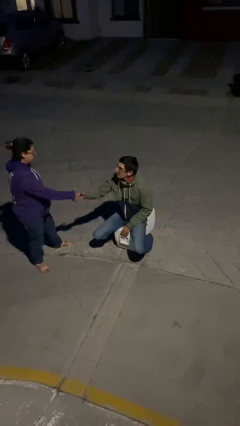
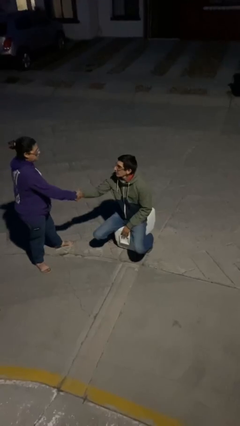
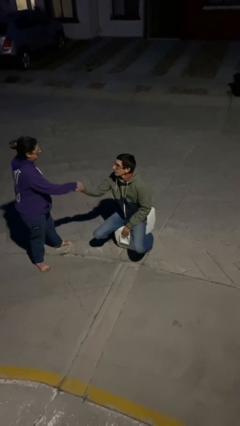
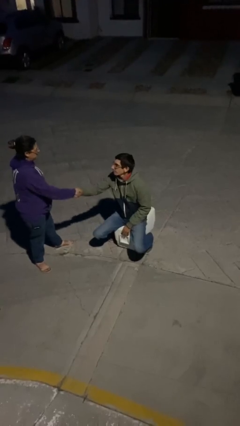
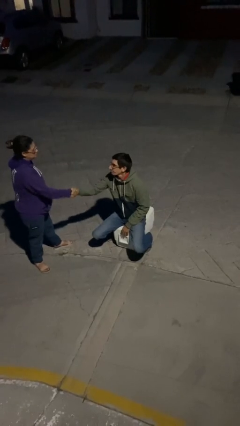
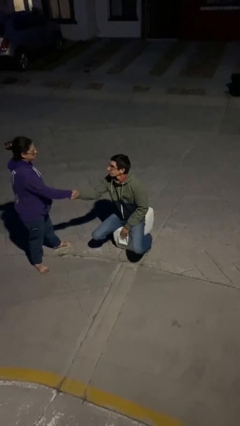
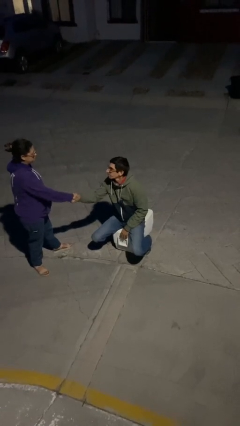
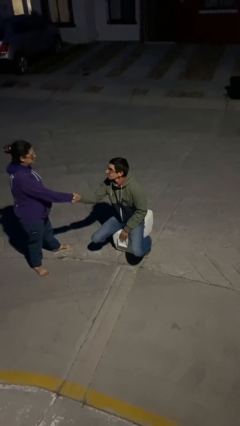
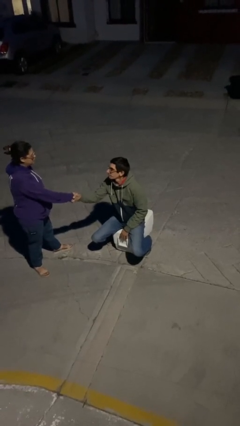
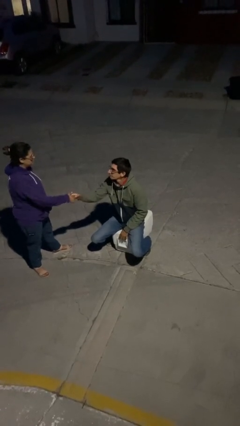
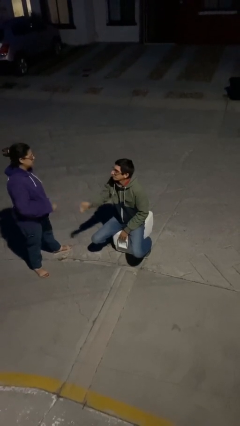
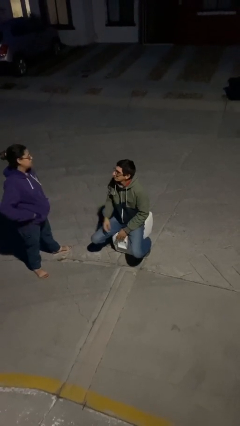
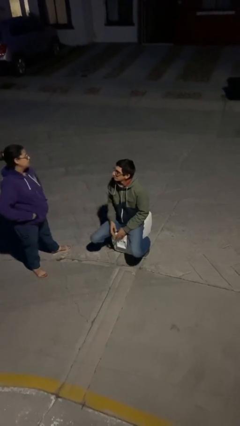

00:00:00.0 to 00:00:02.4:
person shakes hand

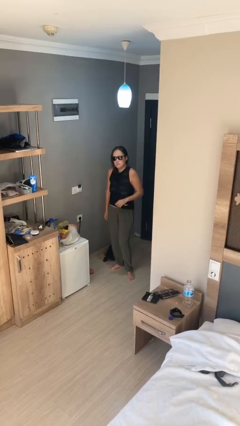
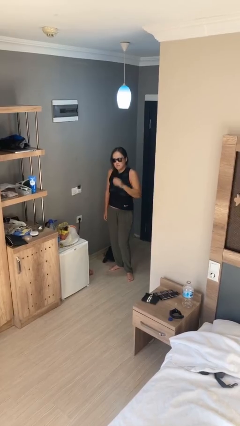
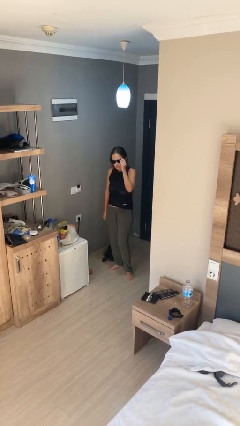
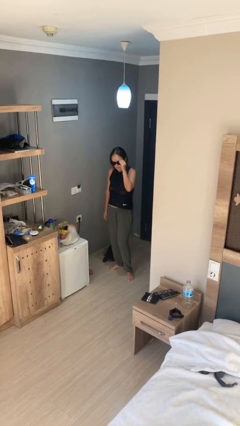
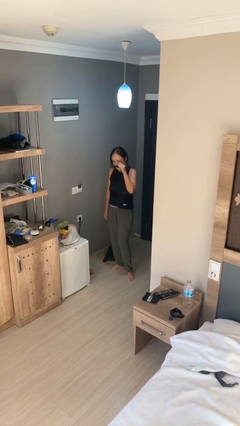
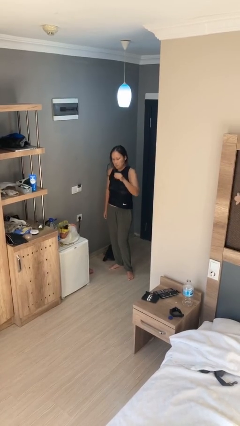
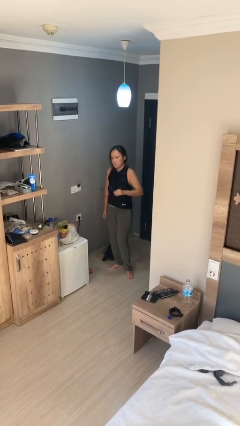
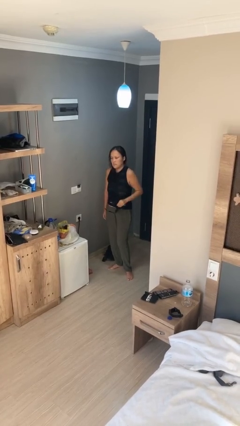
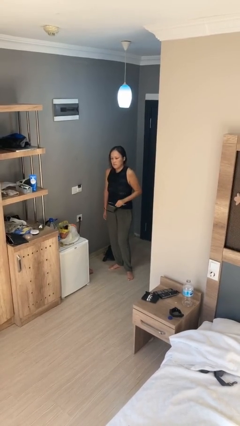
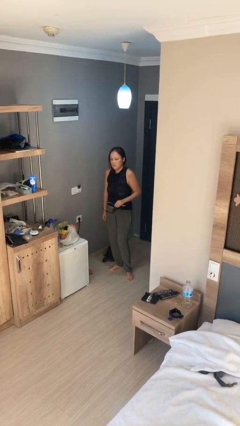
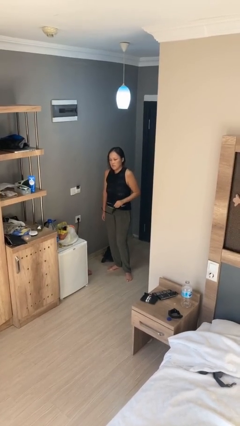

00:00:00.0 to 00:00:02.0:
person takes off sunglasses

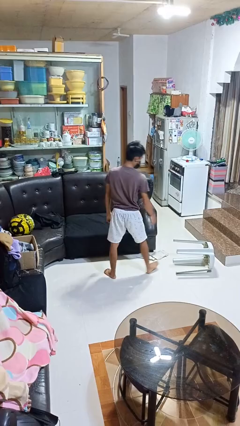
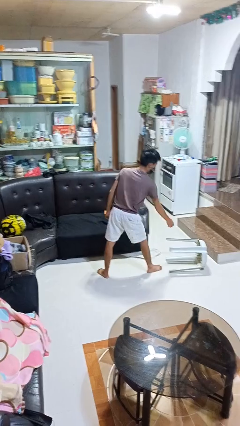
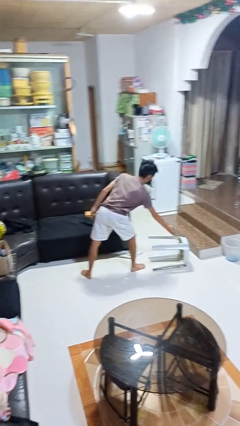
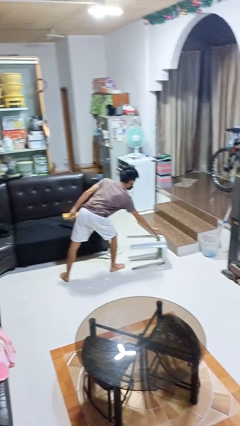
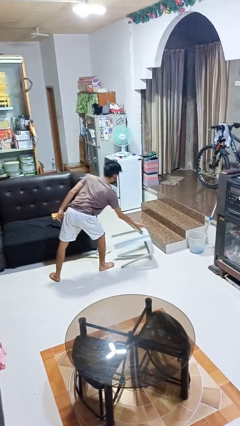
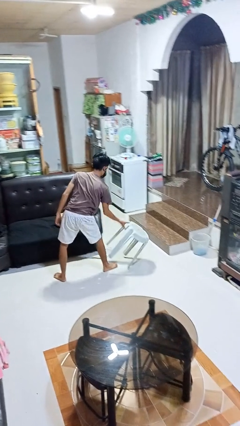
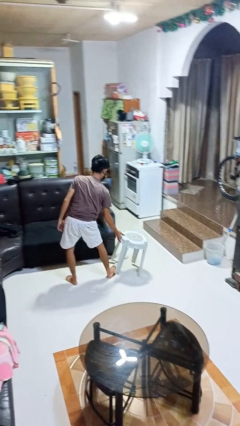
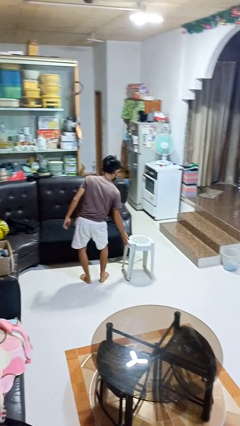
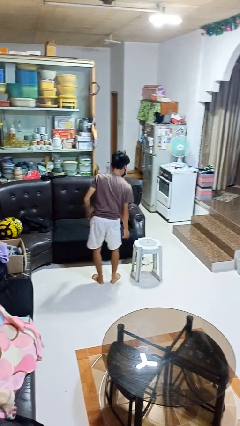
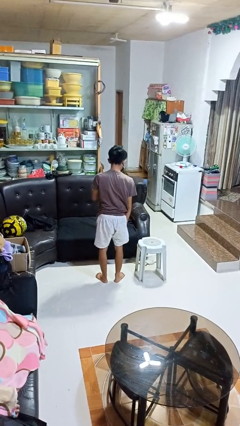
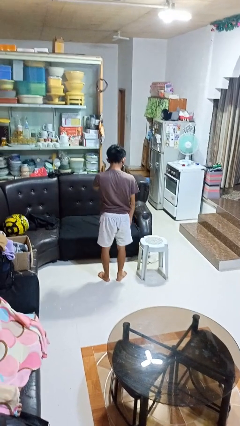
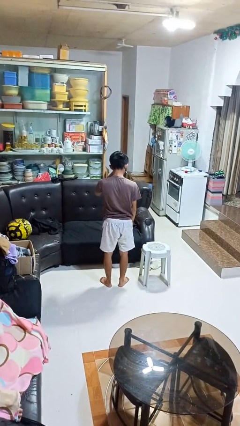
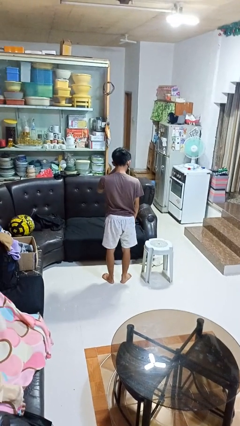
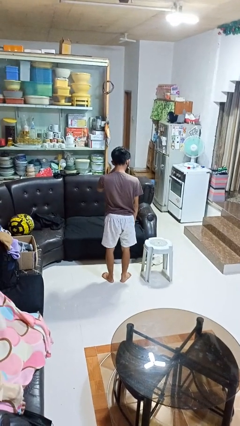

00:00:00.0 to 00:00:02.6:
person sets upright furniture

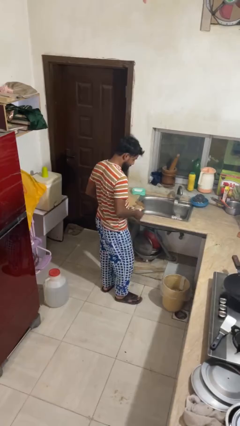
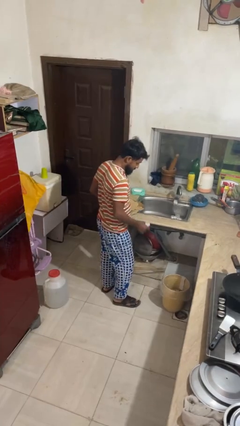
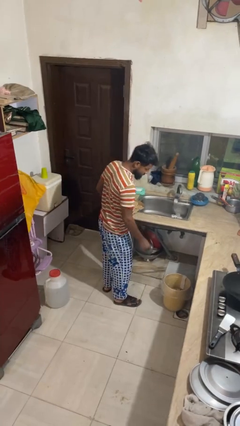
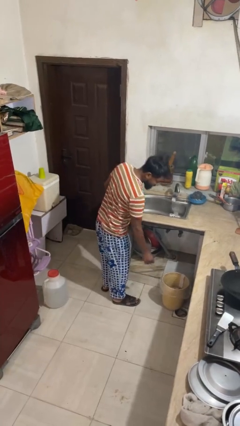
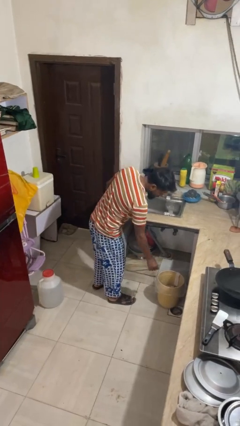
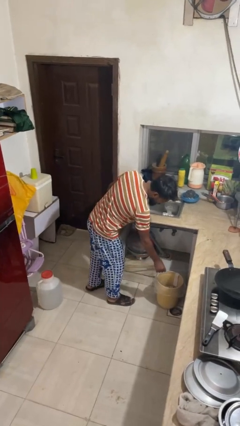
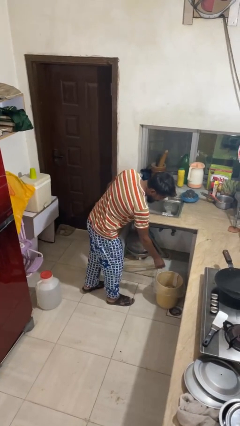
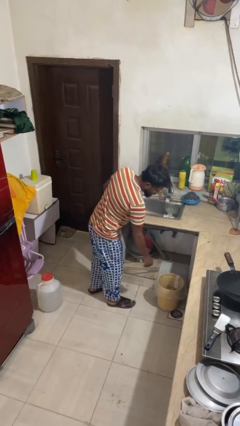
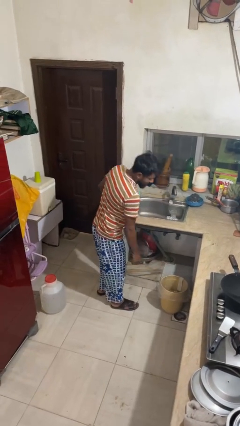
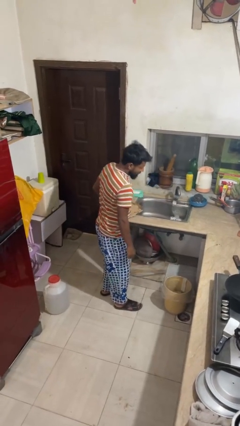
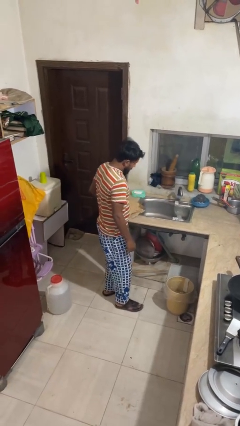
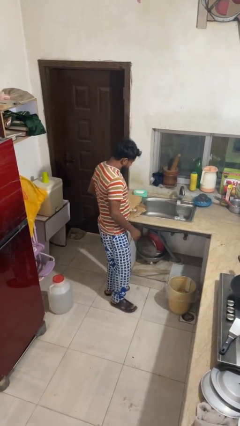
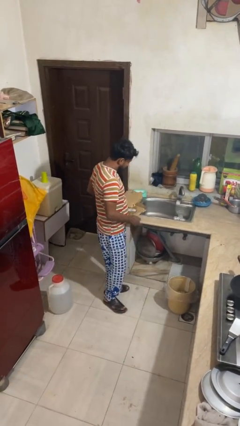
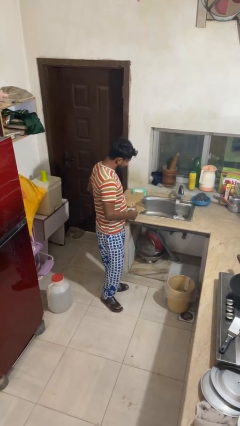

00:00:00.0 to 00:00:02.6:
person discards trash

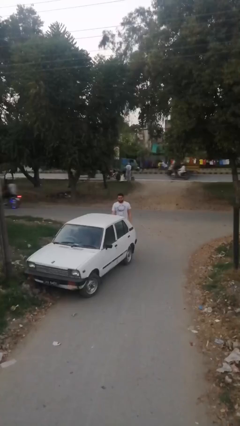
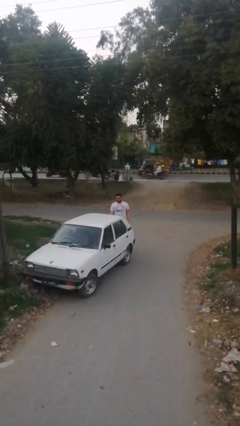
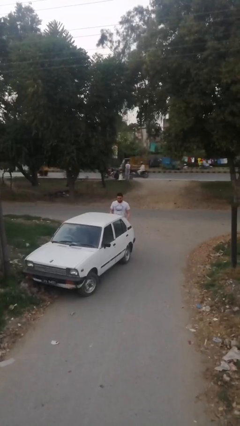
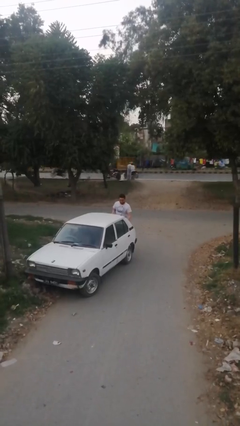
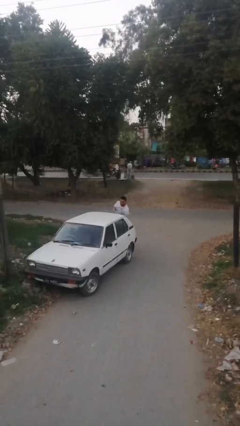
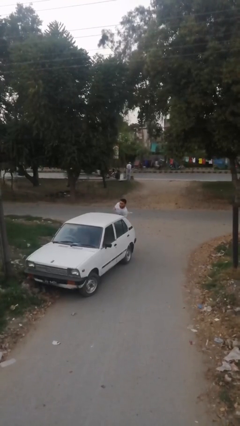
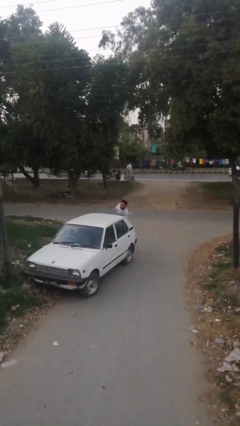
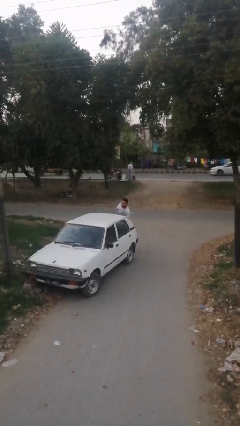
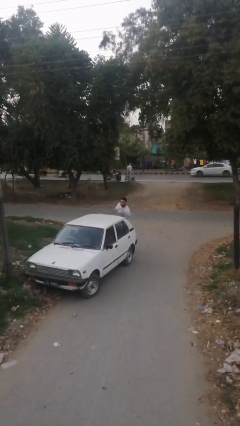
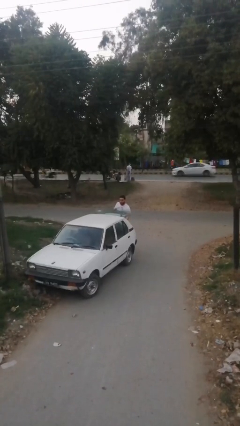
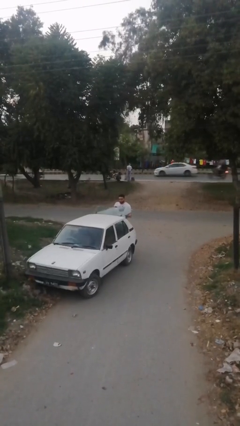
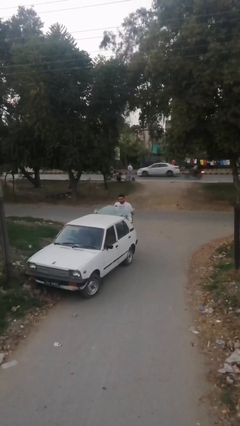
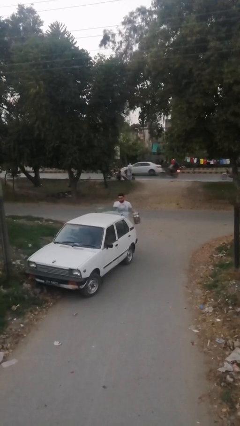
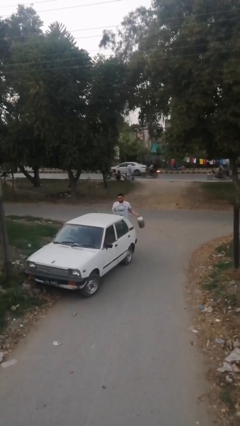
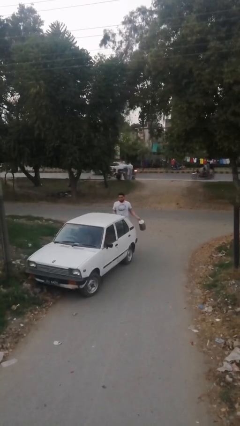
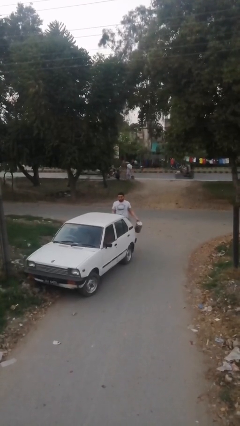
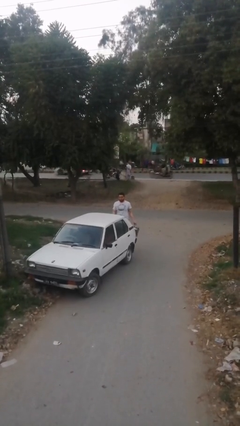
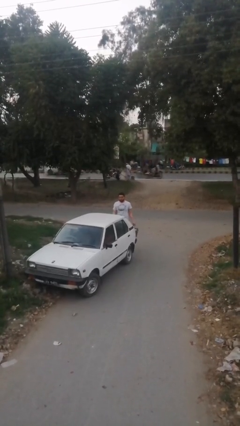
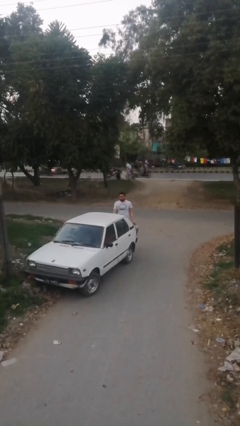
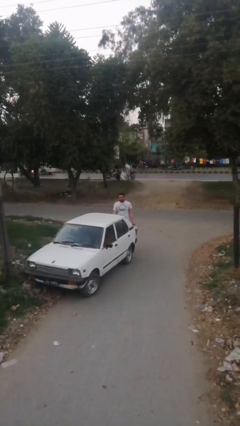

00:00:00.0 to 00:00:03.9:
person unloads car

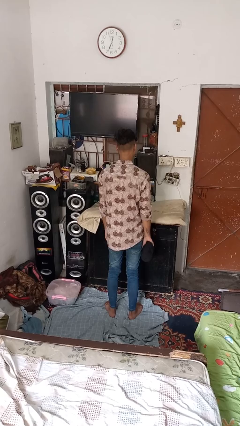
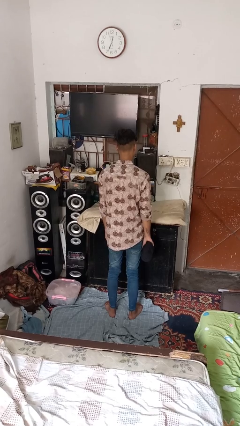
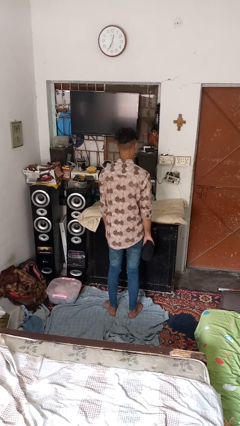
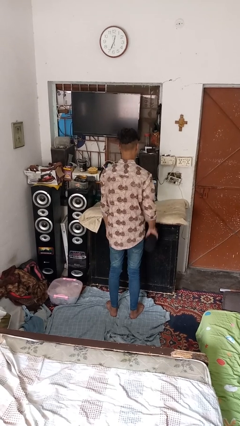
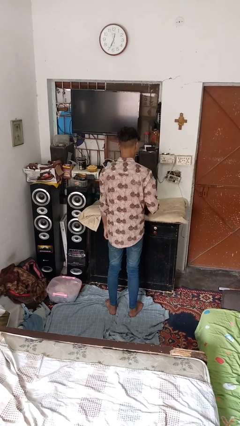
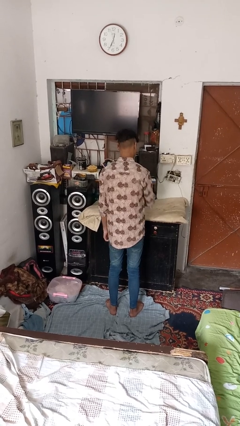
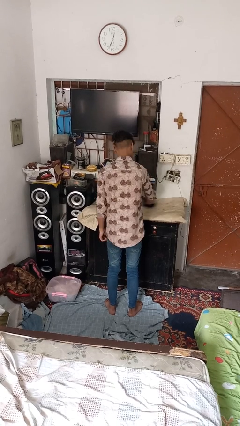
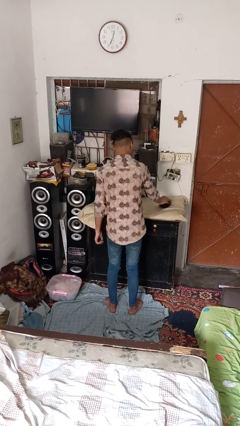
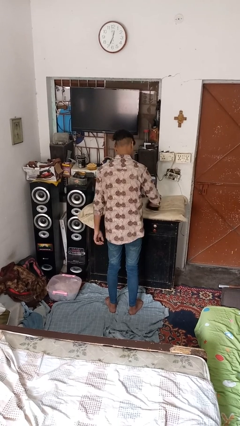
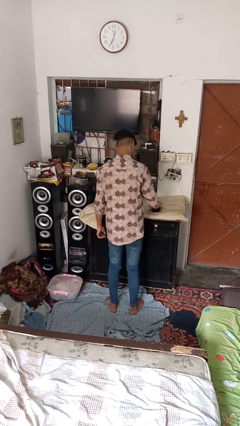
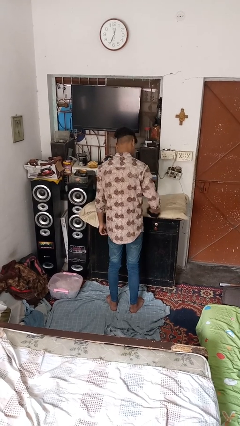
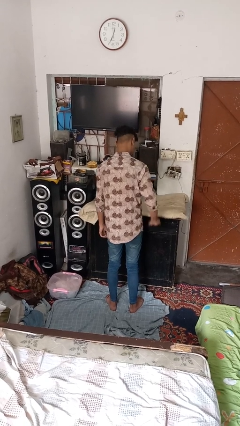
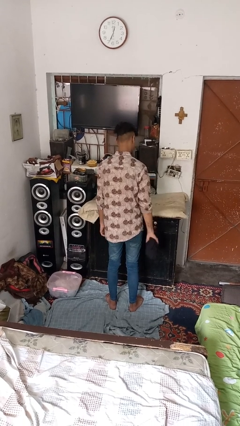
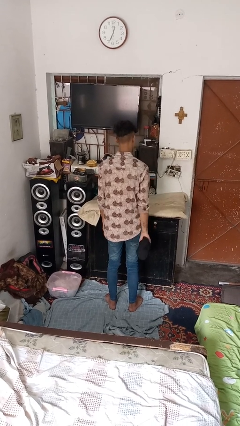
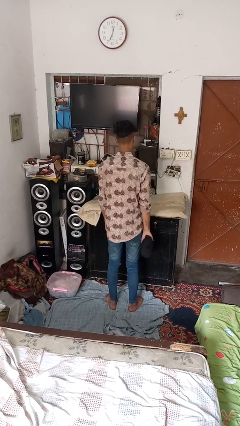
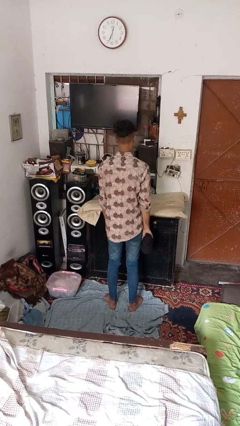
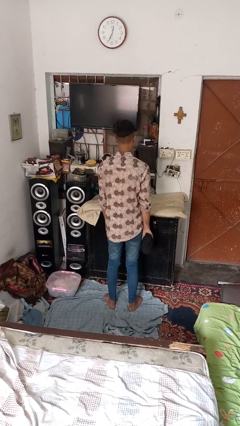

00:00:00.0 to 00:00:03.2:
person cleans table with rag

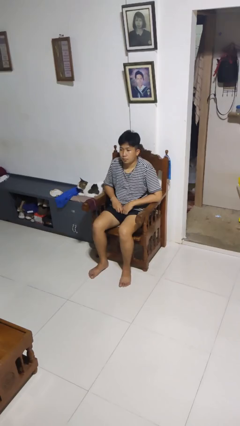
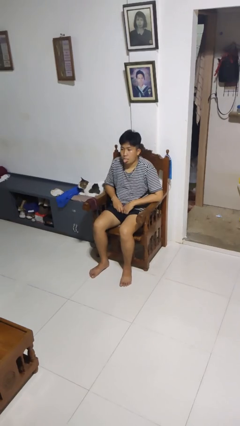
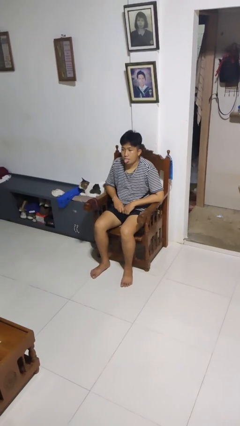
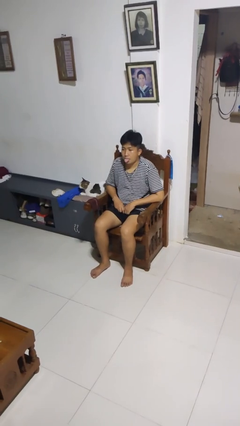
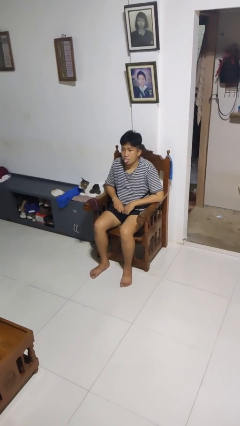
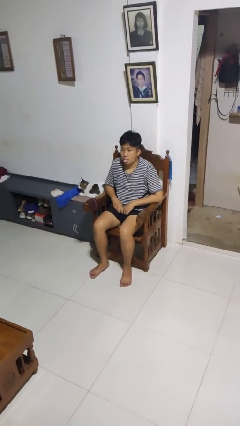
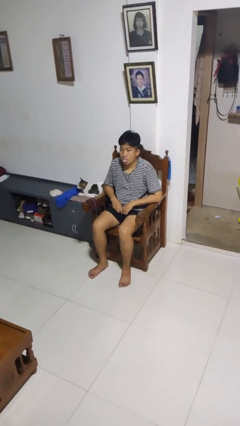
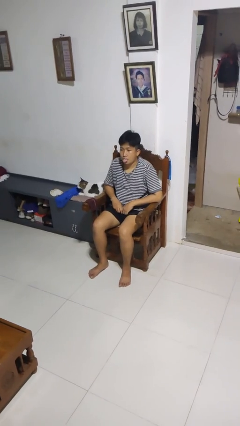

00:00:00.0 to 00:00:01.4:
person sticks out tongue
